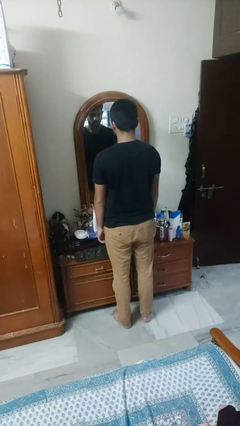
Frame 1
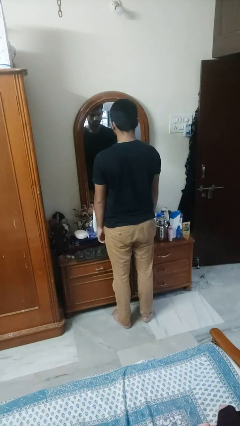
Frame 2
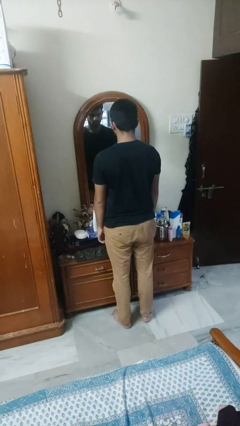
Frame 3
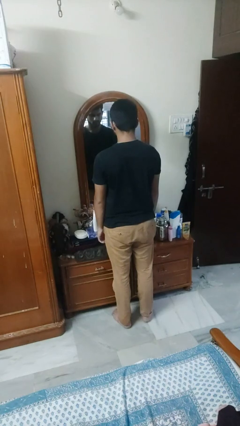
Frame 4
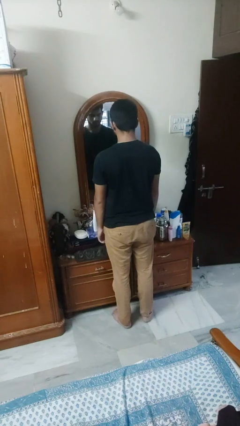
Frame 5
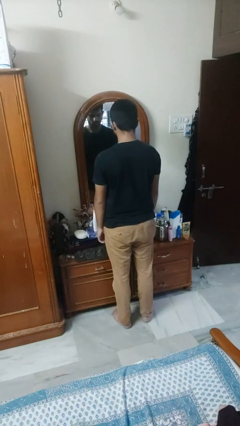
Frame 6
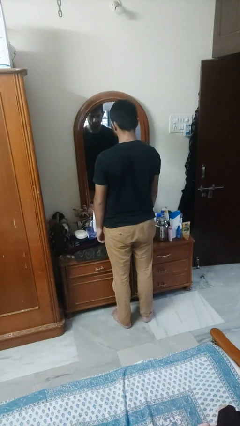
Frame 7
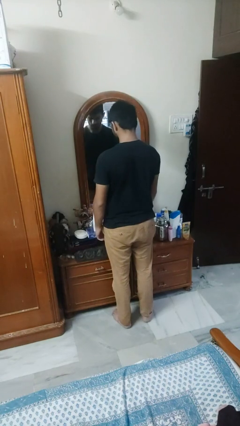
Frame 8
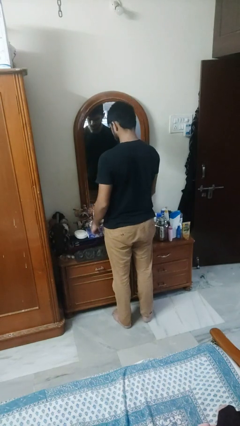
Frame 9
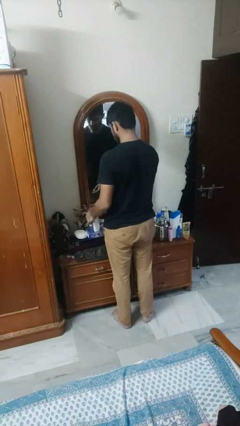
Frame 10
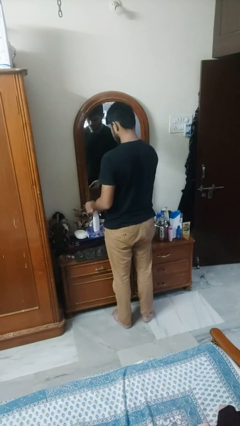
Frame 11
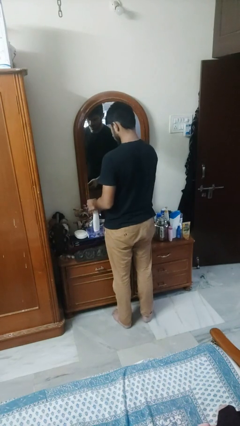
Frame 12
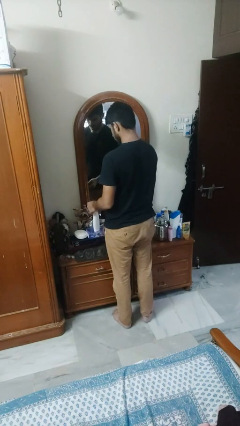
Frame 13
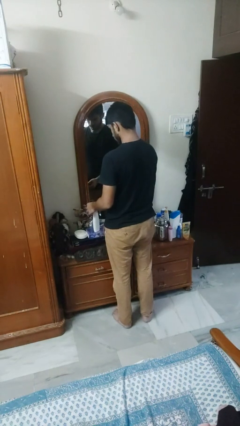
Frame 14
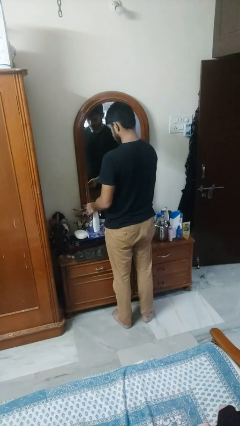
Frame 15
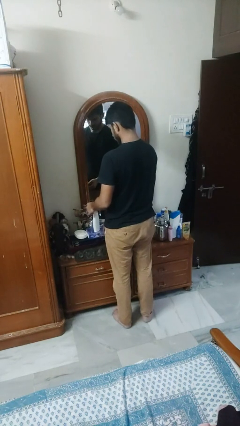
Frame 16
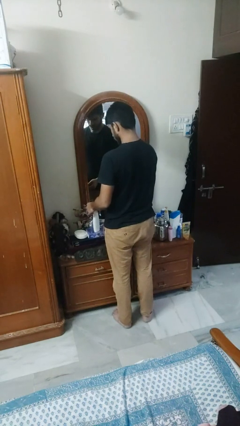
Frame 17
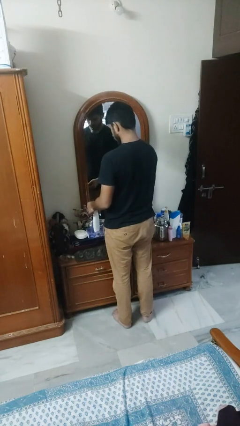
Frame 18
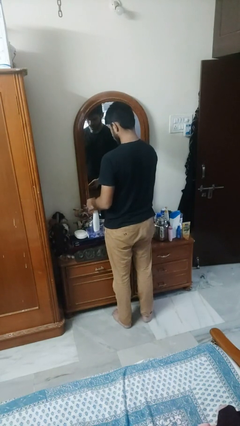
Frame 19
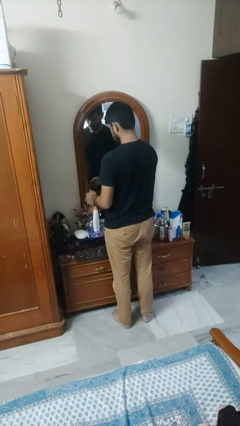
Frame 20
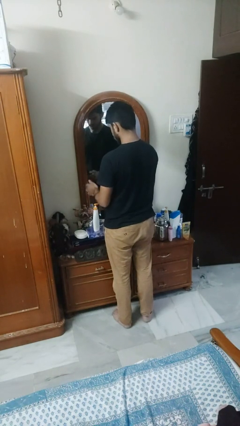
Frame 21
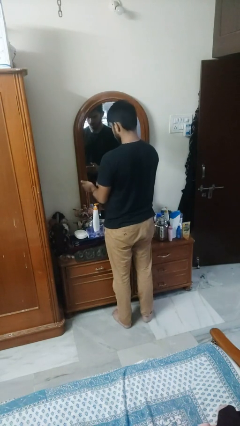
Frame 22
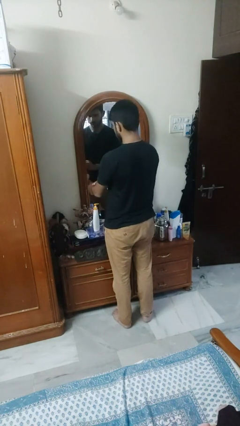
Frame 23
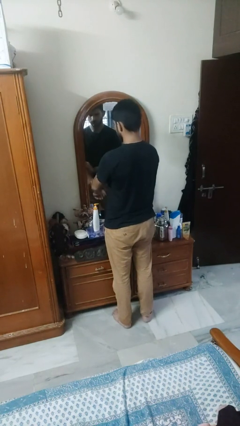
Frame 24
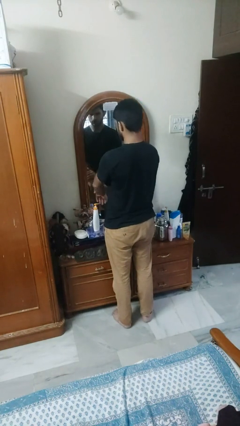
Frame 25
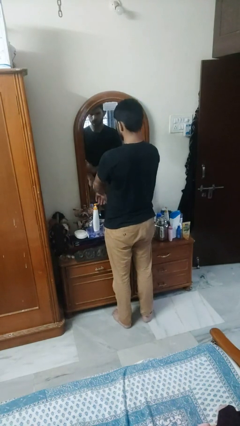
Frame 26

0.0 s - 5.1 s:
person applies facial moisturizer

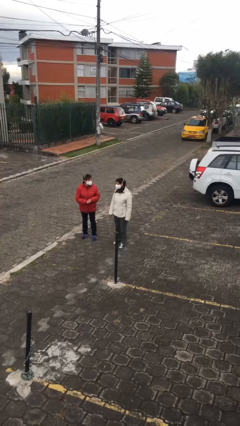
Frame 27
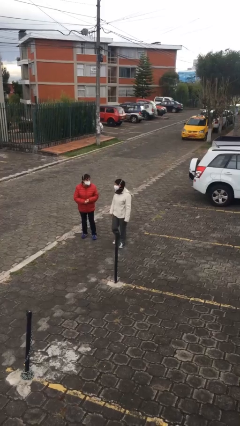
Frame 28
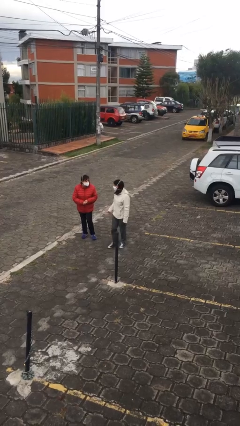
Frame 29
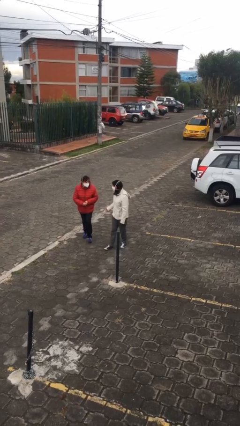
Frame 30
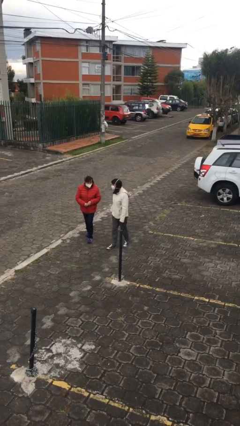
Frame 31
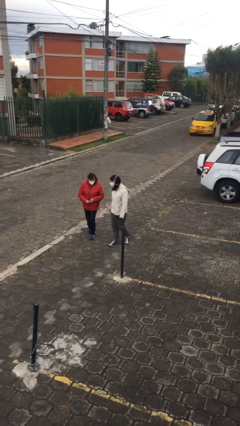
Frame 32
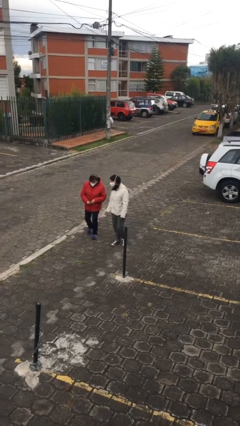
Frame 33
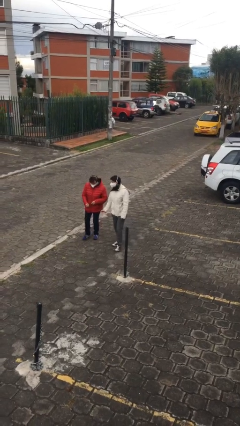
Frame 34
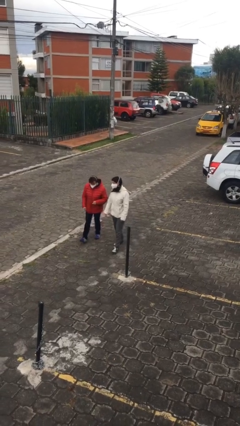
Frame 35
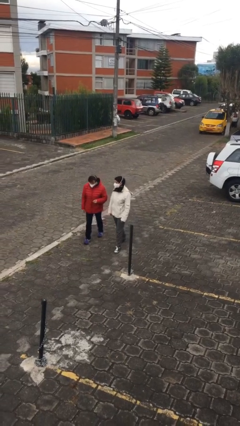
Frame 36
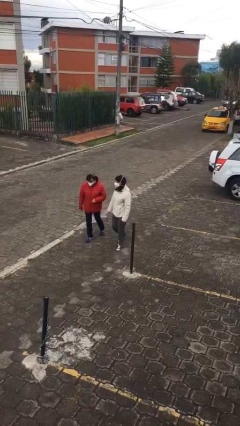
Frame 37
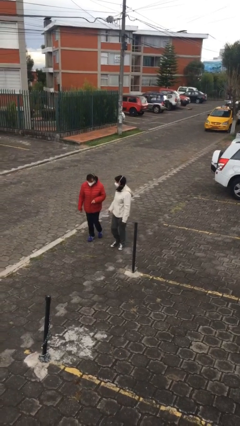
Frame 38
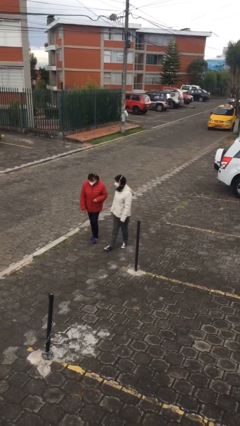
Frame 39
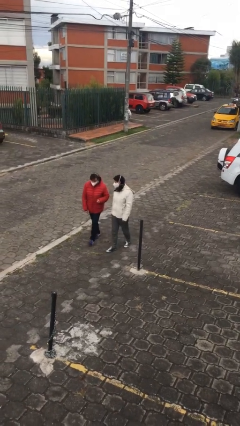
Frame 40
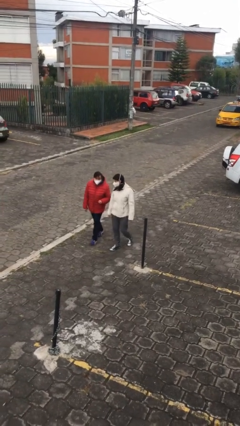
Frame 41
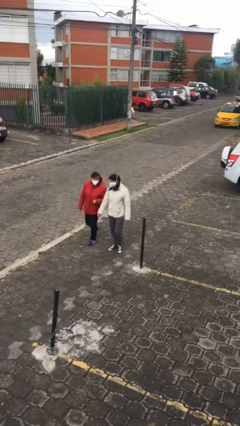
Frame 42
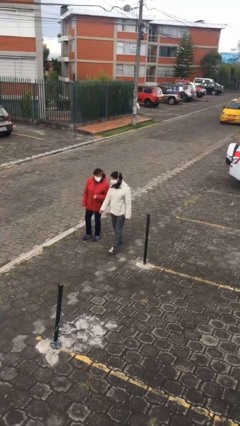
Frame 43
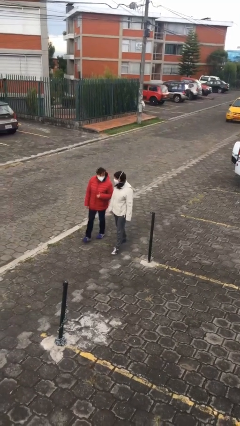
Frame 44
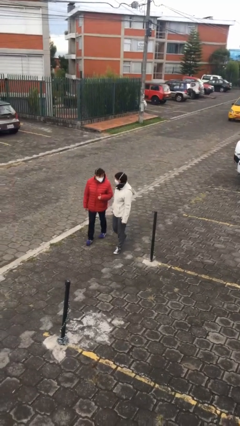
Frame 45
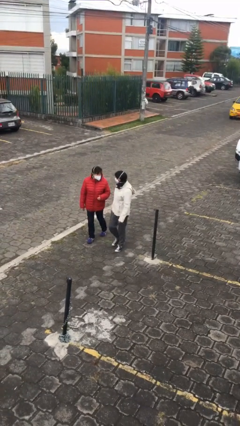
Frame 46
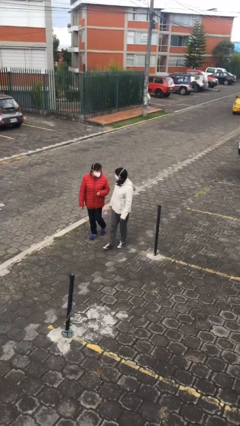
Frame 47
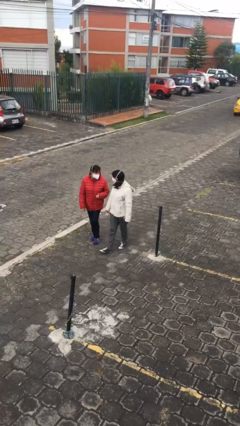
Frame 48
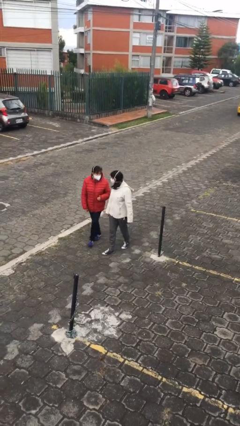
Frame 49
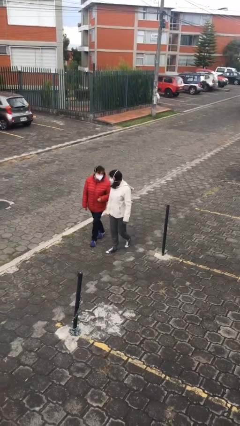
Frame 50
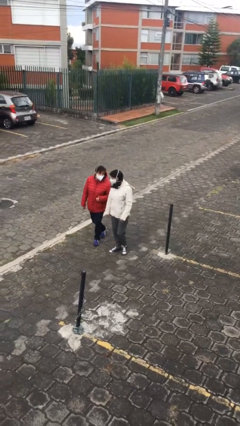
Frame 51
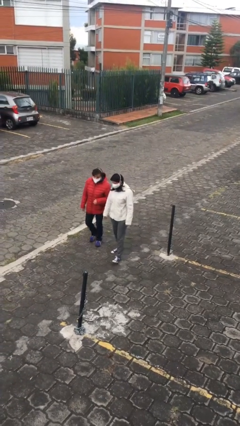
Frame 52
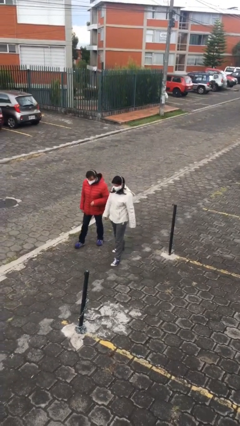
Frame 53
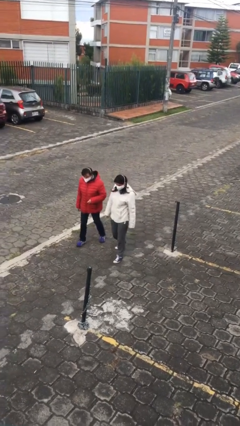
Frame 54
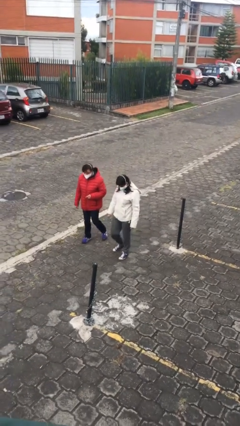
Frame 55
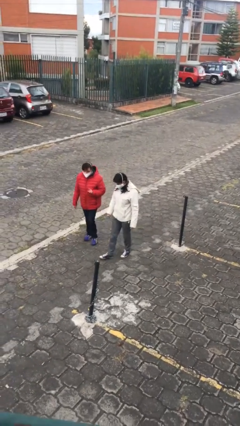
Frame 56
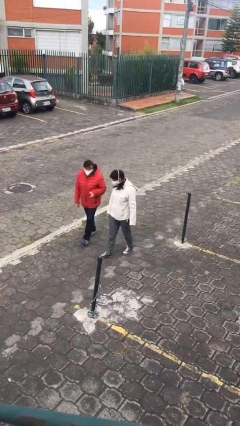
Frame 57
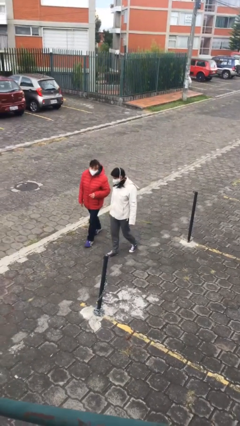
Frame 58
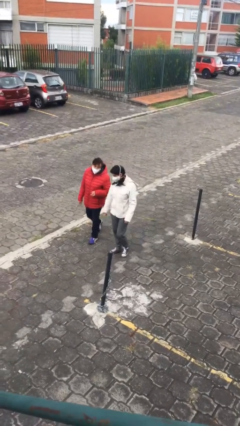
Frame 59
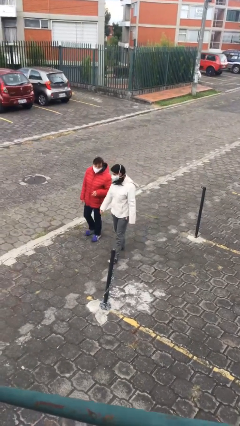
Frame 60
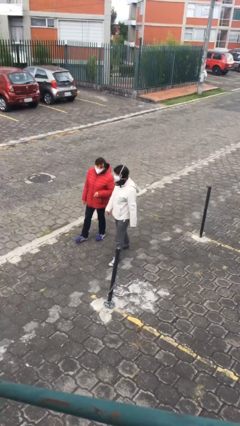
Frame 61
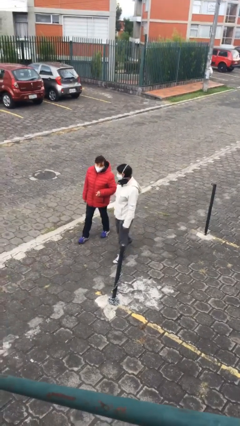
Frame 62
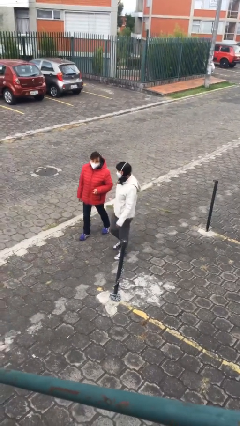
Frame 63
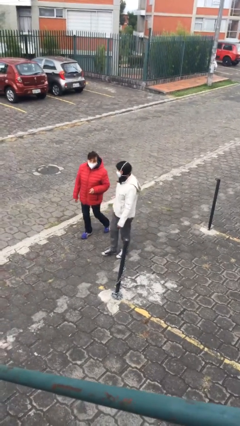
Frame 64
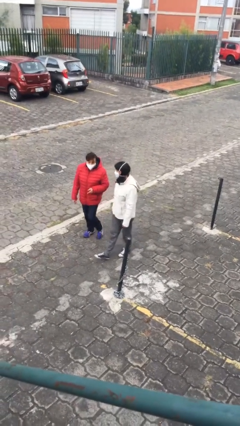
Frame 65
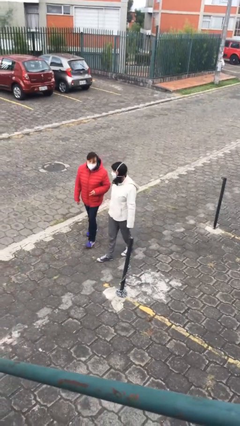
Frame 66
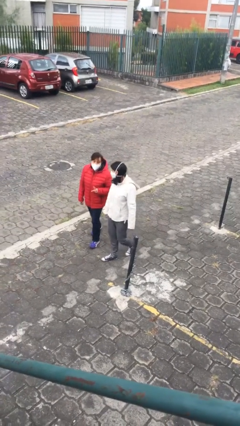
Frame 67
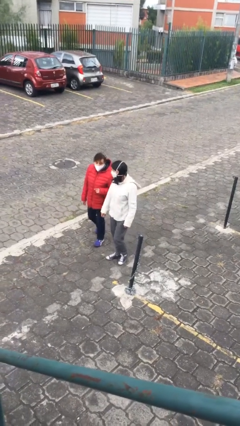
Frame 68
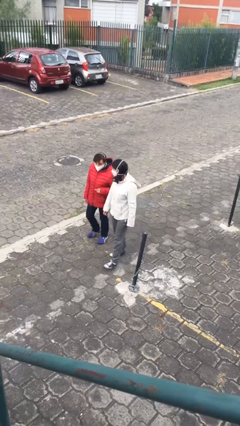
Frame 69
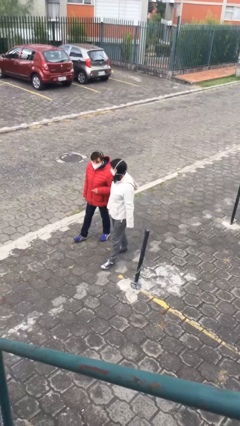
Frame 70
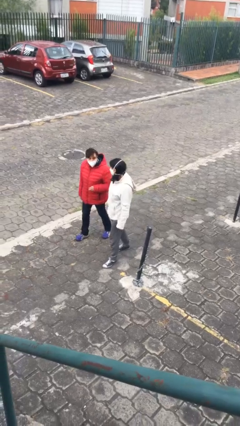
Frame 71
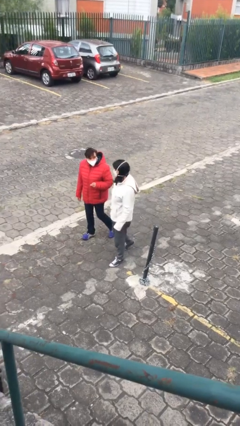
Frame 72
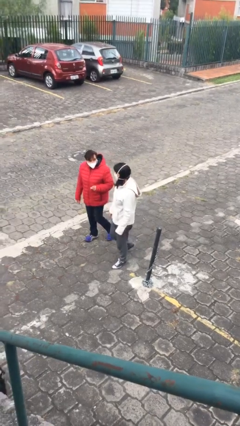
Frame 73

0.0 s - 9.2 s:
person talks to person

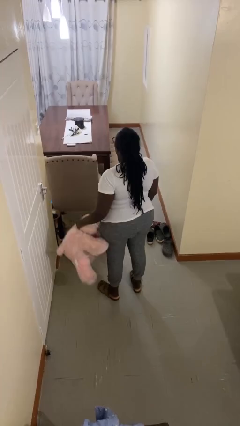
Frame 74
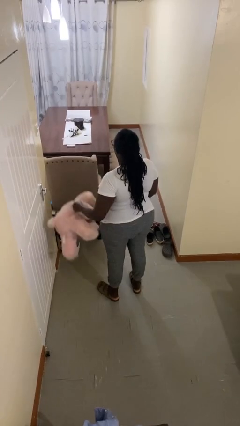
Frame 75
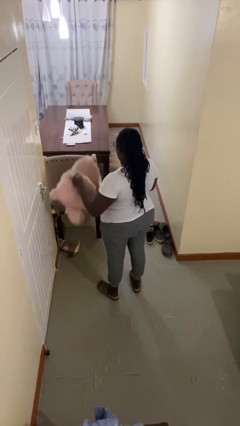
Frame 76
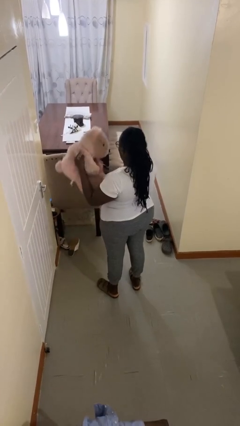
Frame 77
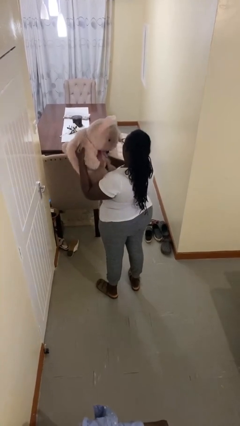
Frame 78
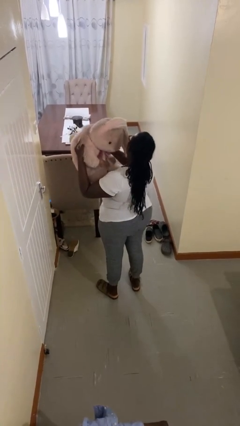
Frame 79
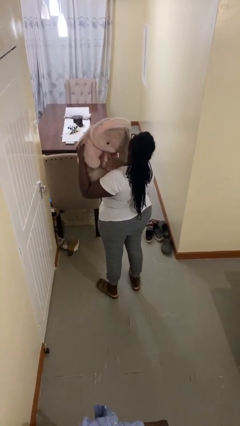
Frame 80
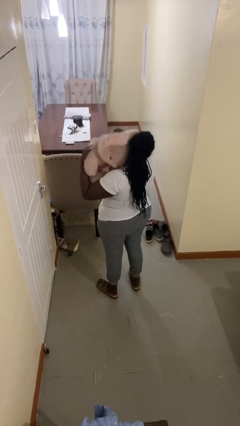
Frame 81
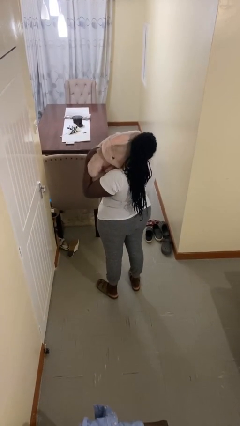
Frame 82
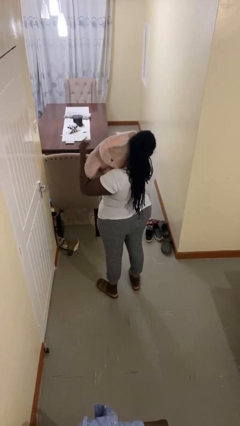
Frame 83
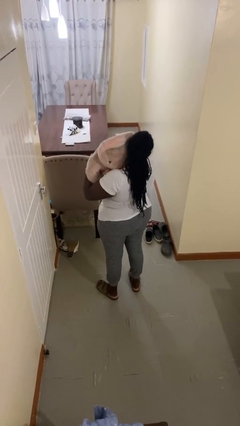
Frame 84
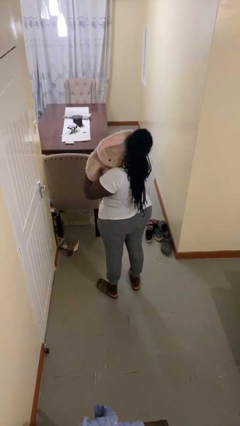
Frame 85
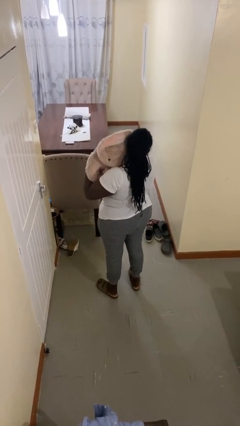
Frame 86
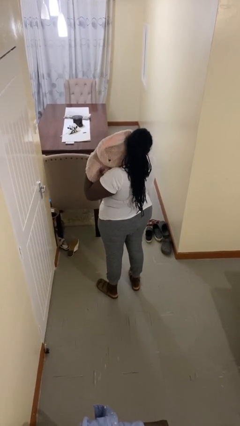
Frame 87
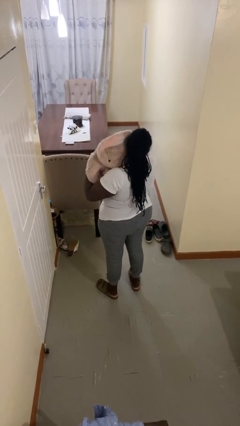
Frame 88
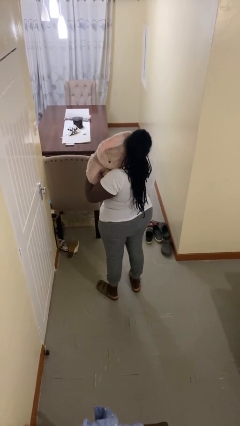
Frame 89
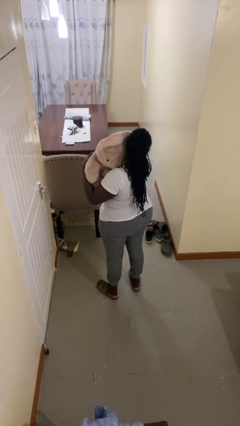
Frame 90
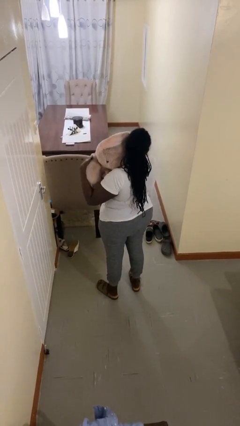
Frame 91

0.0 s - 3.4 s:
person hugs stuffed animal
